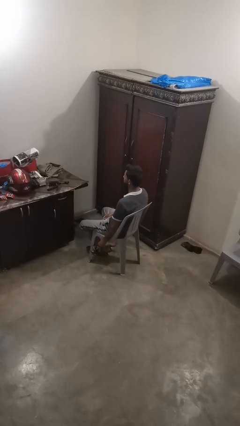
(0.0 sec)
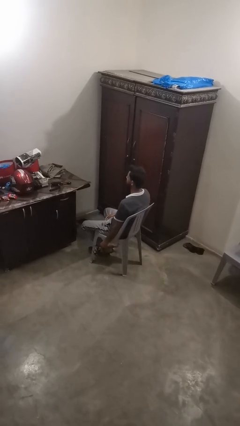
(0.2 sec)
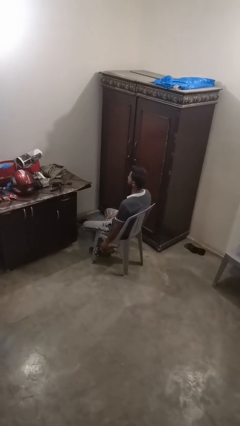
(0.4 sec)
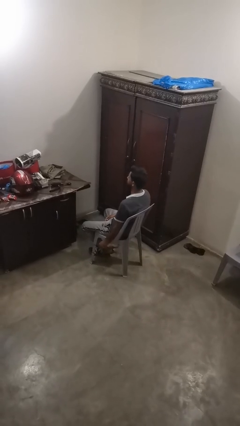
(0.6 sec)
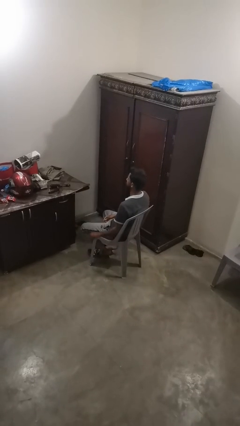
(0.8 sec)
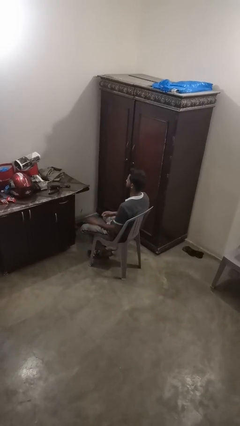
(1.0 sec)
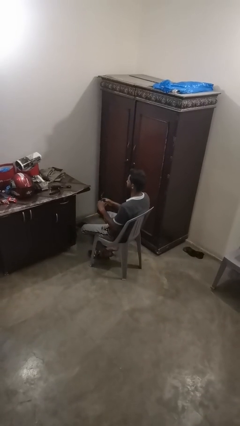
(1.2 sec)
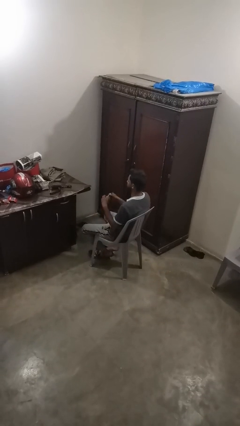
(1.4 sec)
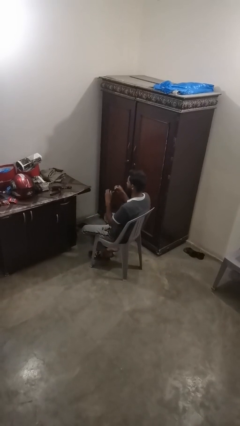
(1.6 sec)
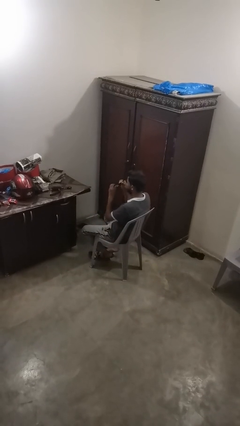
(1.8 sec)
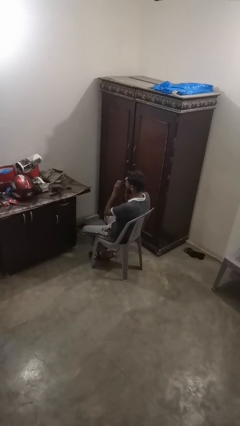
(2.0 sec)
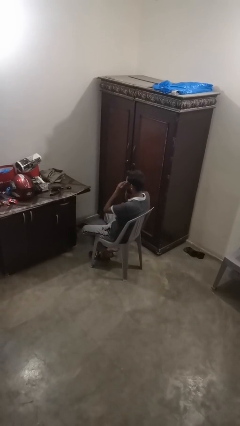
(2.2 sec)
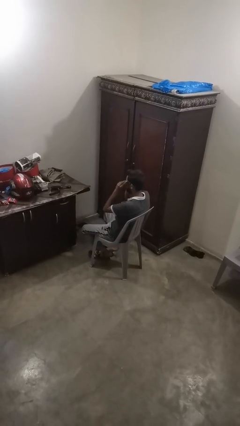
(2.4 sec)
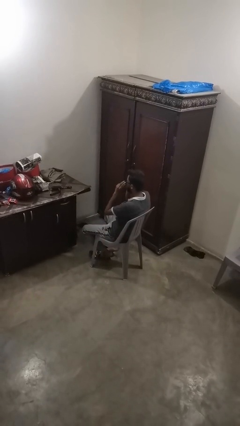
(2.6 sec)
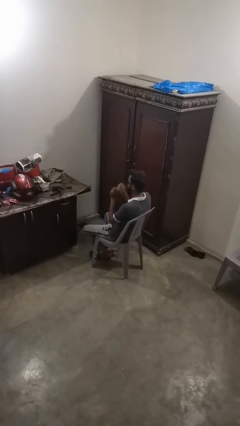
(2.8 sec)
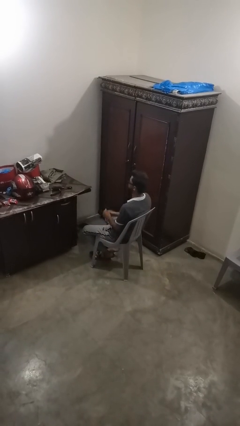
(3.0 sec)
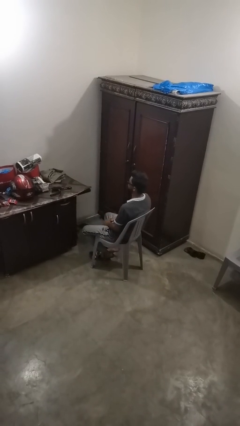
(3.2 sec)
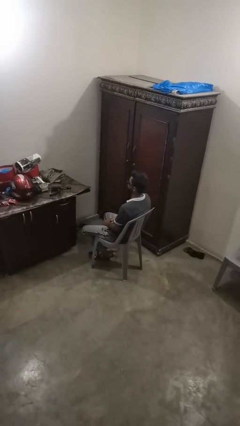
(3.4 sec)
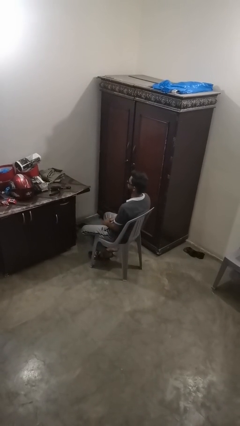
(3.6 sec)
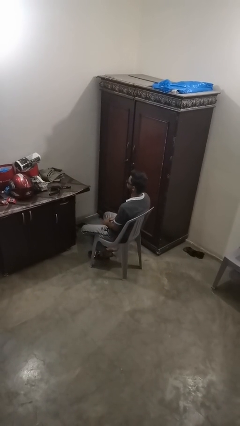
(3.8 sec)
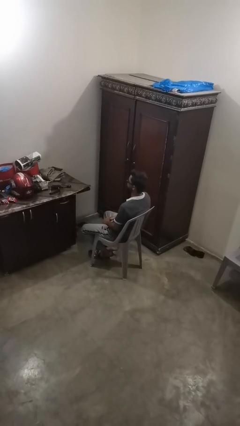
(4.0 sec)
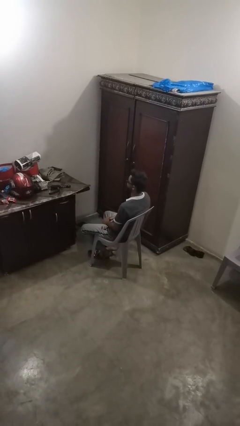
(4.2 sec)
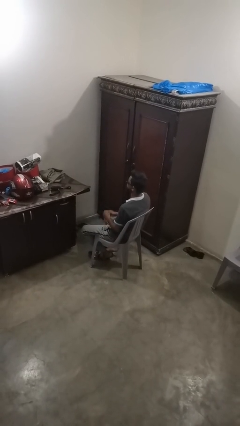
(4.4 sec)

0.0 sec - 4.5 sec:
person puts on sunglasses

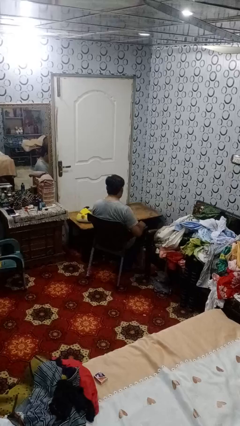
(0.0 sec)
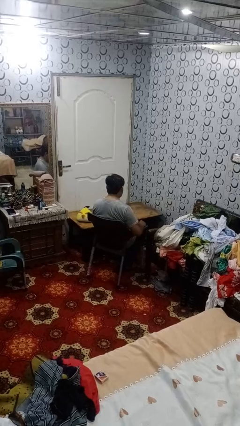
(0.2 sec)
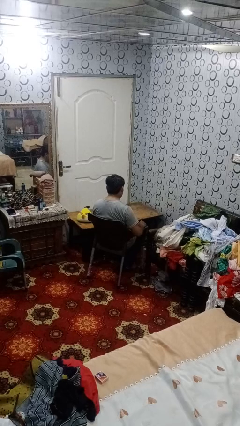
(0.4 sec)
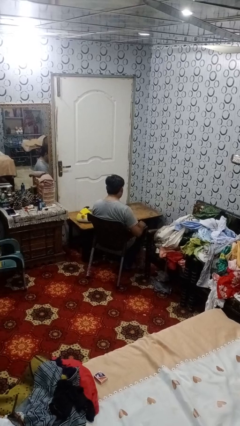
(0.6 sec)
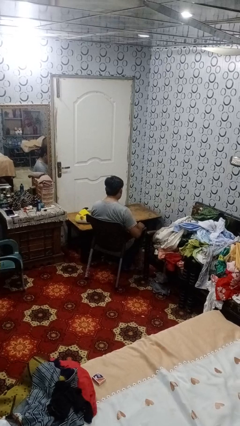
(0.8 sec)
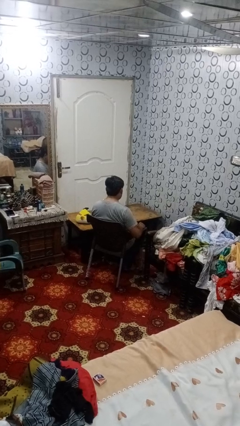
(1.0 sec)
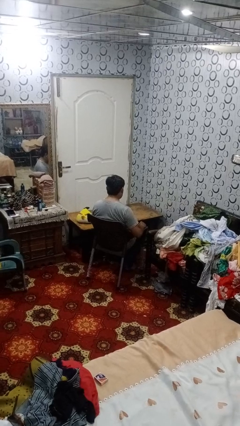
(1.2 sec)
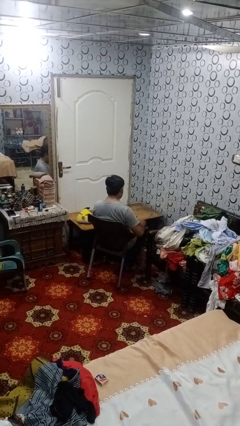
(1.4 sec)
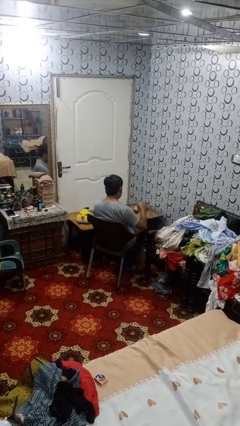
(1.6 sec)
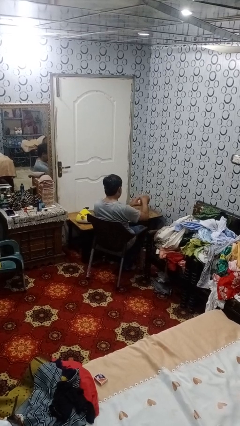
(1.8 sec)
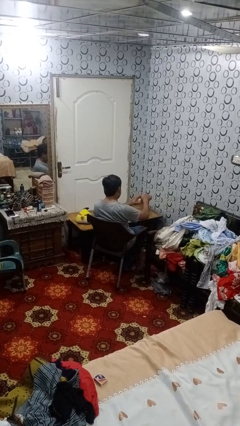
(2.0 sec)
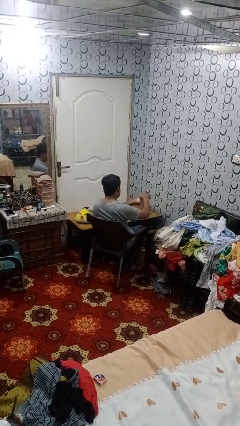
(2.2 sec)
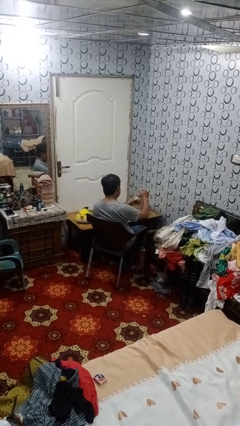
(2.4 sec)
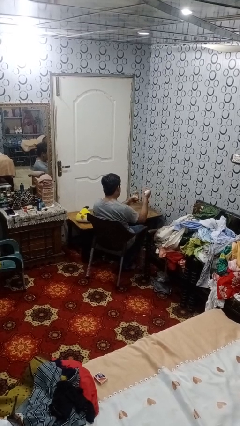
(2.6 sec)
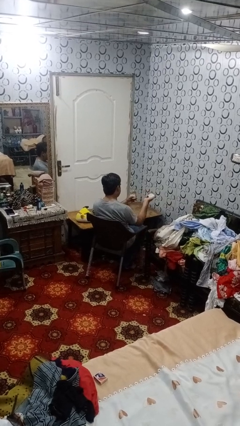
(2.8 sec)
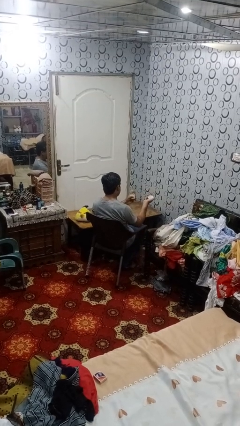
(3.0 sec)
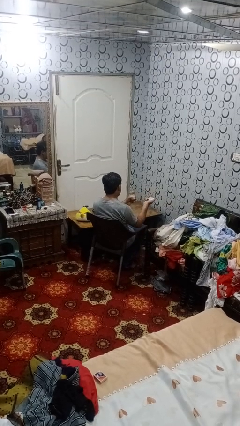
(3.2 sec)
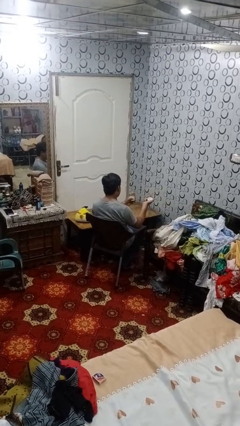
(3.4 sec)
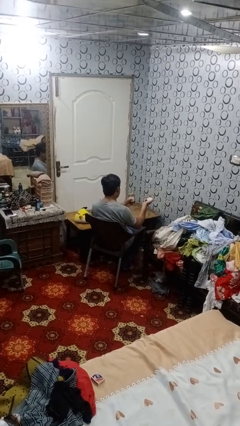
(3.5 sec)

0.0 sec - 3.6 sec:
person opens jar

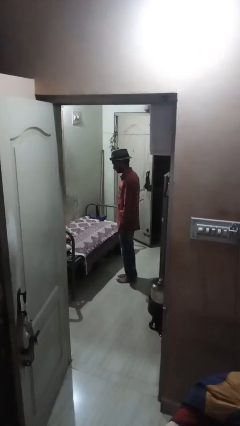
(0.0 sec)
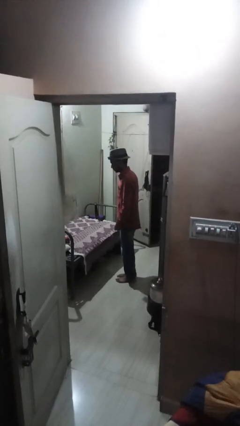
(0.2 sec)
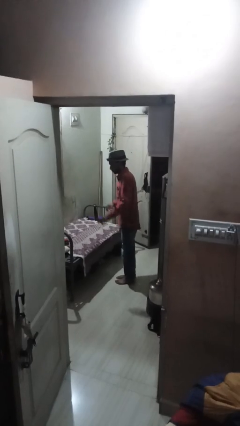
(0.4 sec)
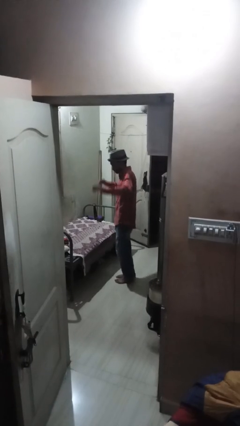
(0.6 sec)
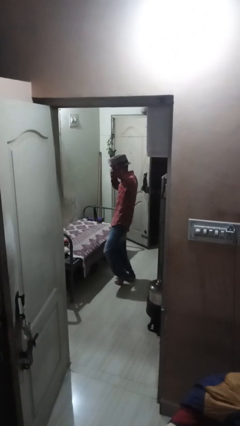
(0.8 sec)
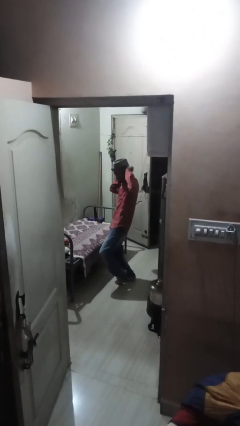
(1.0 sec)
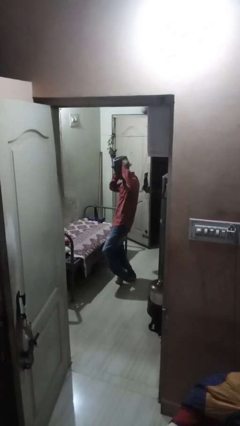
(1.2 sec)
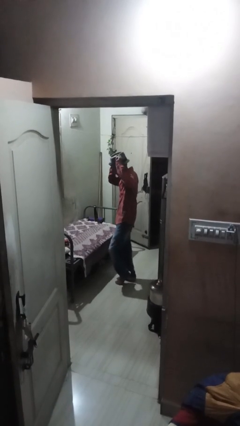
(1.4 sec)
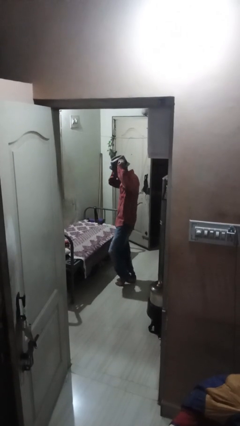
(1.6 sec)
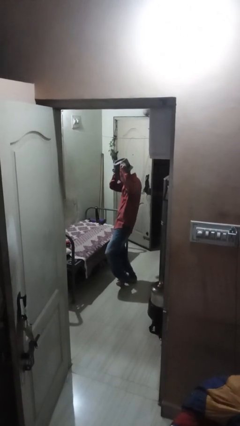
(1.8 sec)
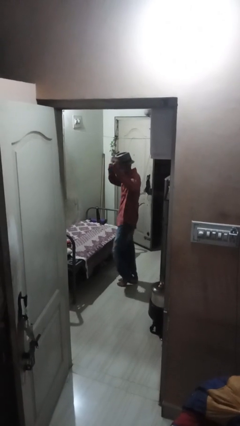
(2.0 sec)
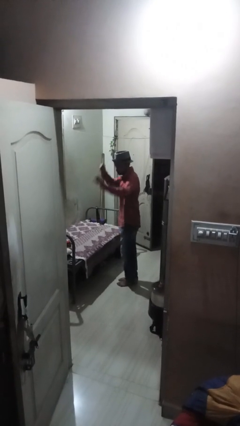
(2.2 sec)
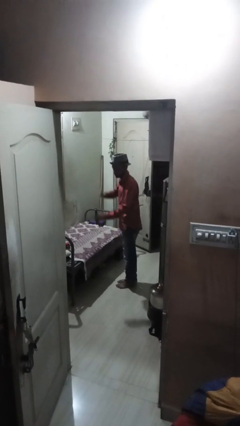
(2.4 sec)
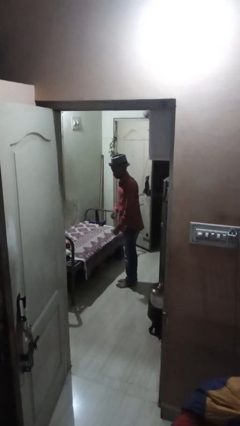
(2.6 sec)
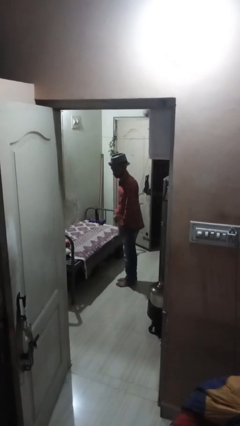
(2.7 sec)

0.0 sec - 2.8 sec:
person dances in place

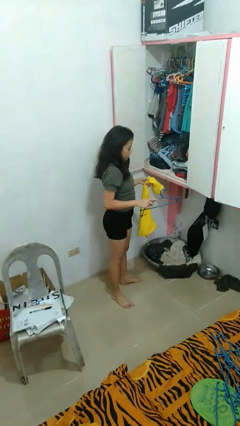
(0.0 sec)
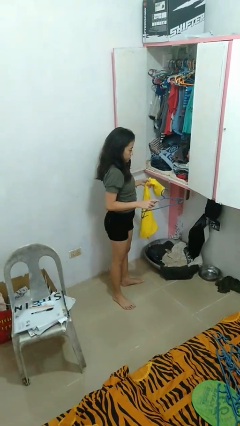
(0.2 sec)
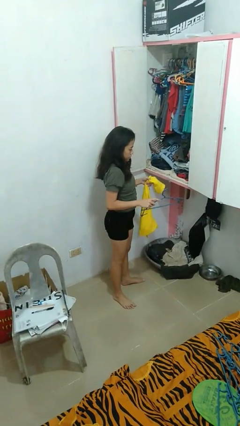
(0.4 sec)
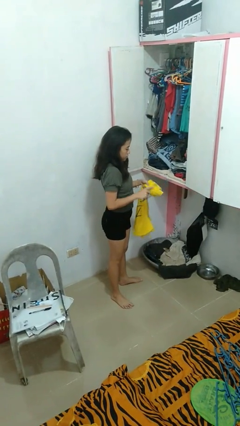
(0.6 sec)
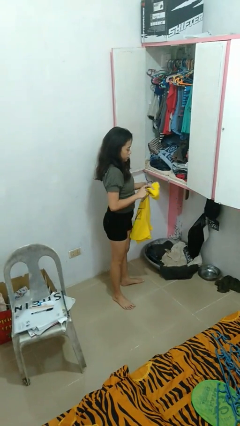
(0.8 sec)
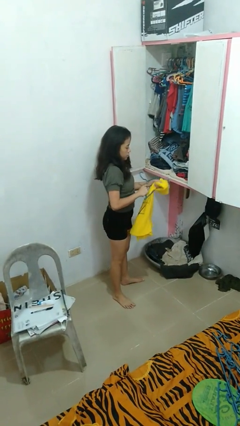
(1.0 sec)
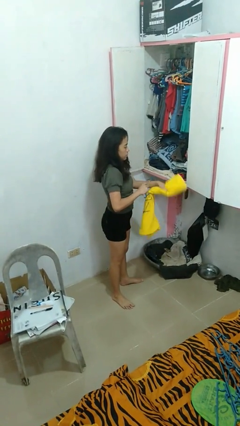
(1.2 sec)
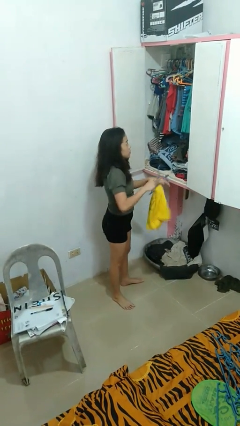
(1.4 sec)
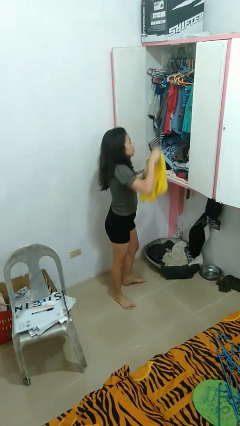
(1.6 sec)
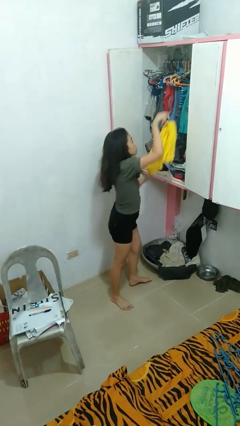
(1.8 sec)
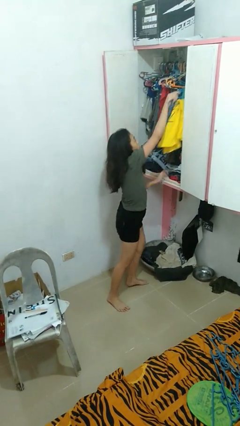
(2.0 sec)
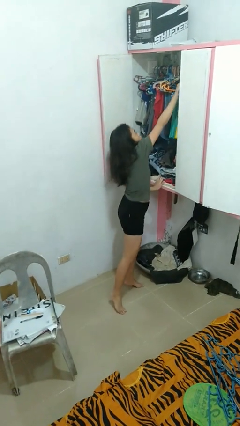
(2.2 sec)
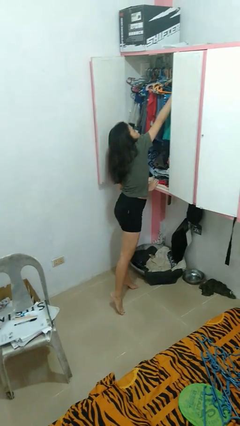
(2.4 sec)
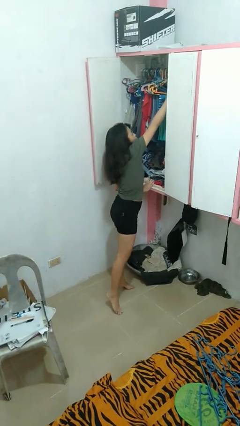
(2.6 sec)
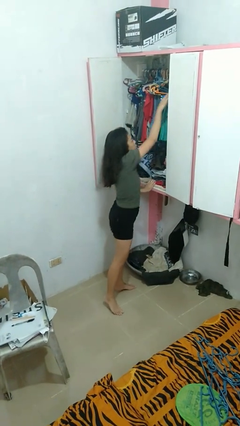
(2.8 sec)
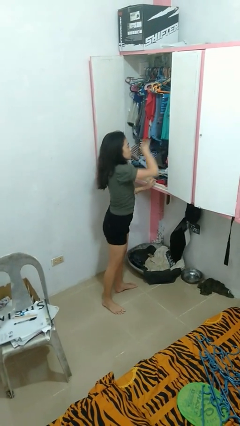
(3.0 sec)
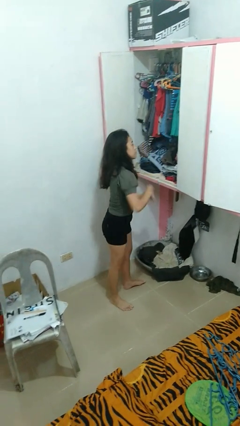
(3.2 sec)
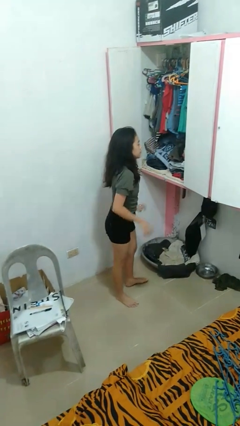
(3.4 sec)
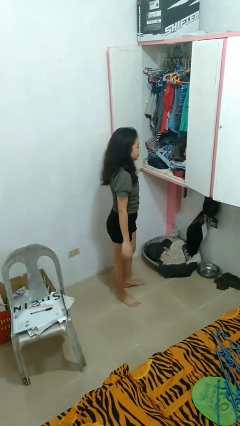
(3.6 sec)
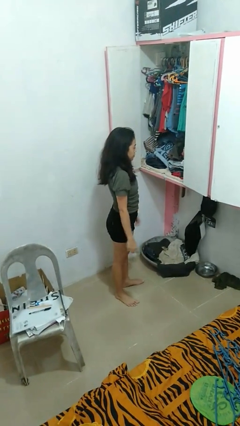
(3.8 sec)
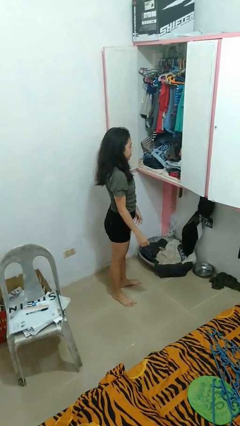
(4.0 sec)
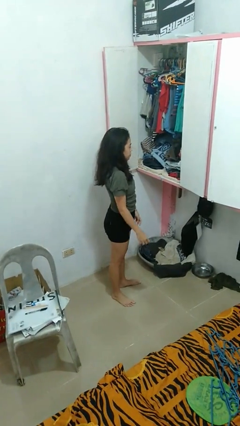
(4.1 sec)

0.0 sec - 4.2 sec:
person puts clothes into closet

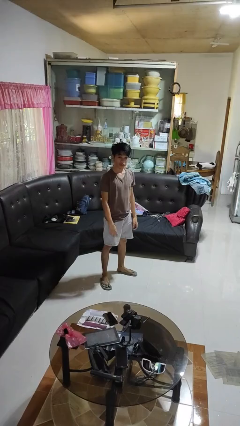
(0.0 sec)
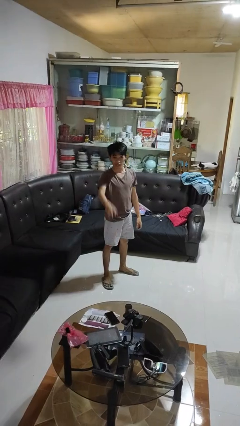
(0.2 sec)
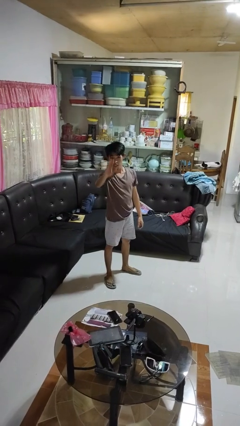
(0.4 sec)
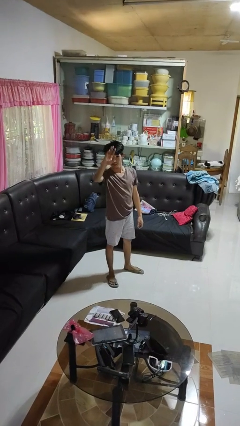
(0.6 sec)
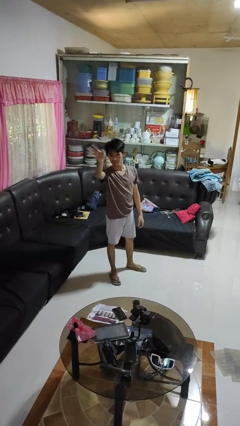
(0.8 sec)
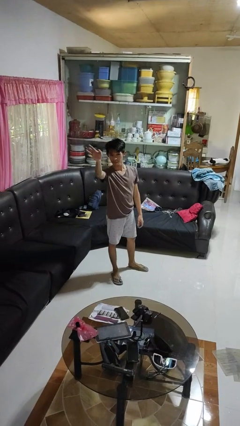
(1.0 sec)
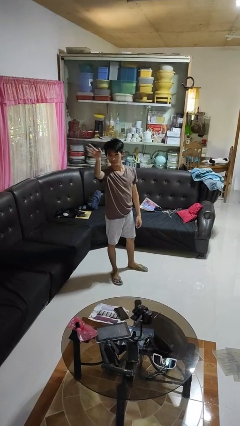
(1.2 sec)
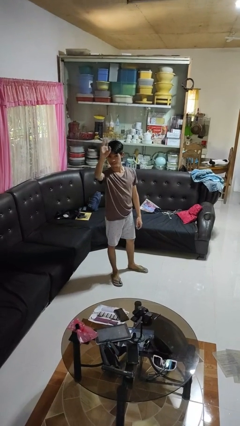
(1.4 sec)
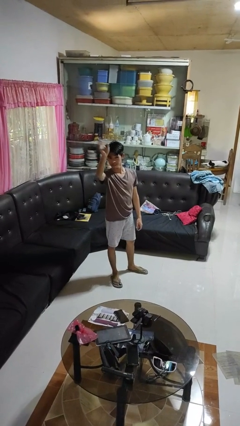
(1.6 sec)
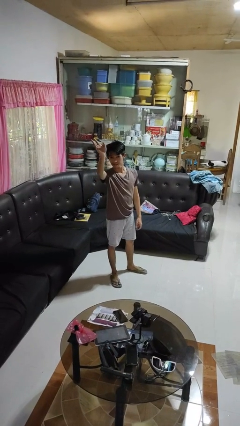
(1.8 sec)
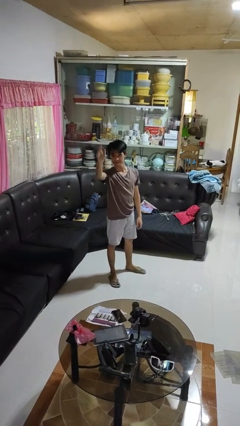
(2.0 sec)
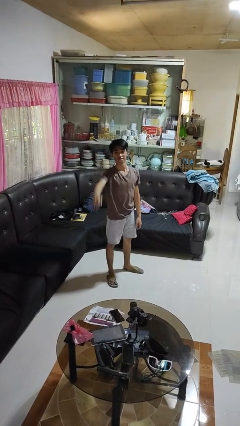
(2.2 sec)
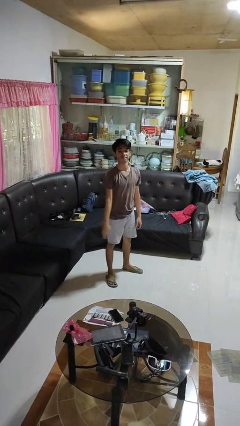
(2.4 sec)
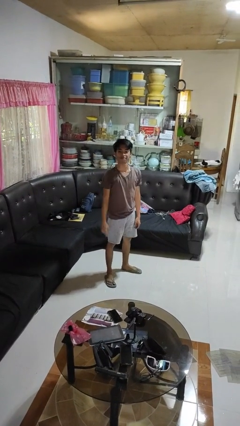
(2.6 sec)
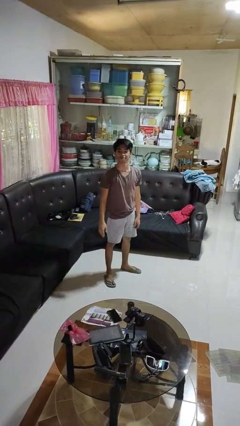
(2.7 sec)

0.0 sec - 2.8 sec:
person waves at person
